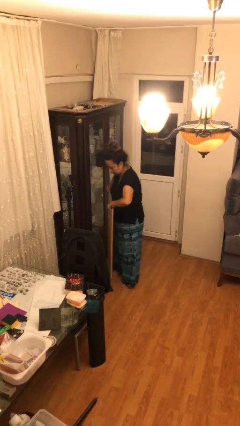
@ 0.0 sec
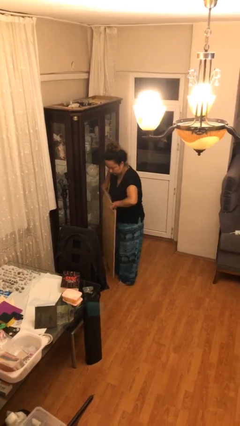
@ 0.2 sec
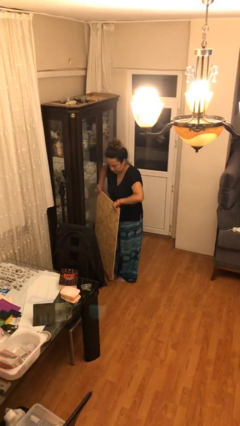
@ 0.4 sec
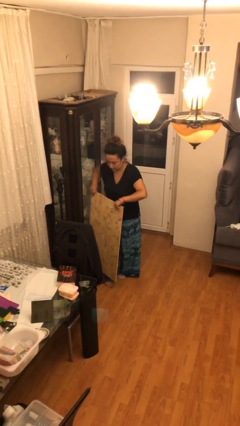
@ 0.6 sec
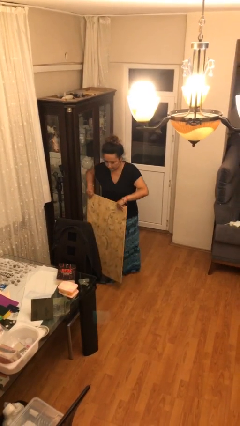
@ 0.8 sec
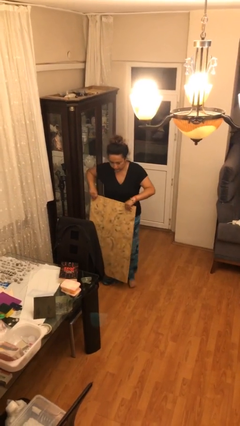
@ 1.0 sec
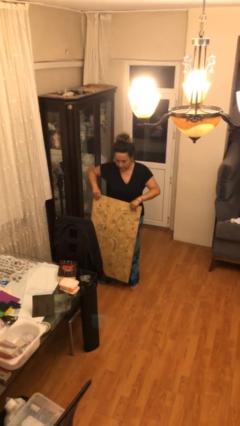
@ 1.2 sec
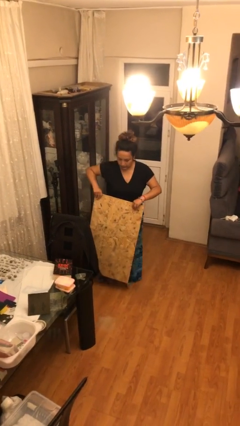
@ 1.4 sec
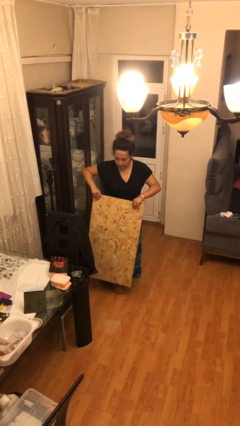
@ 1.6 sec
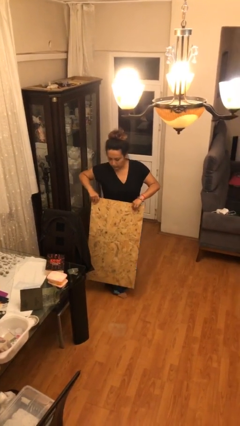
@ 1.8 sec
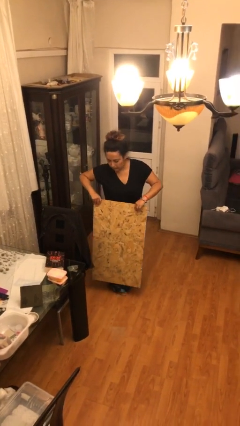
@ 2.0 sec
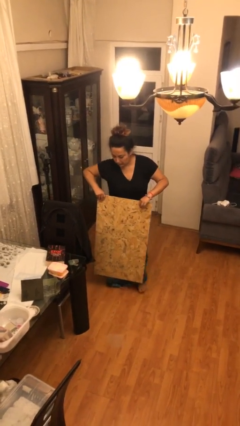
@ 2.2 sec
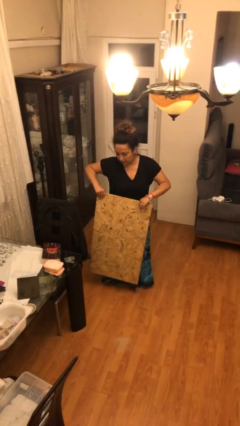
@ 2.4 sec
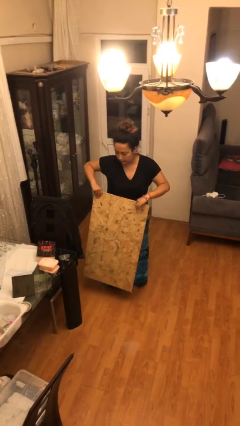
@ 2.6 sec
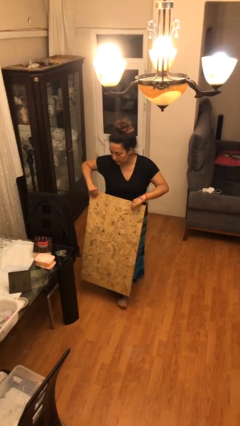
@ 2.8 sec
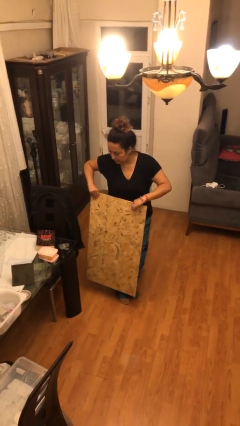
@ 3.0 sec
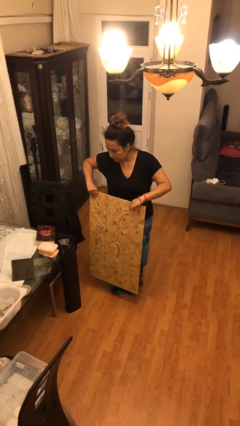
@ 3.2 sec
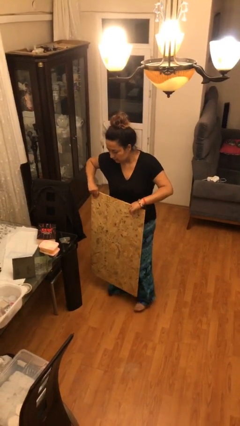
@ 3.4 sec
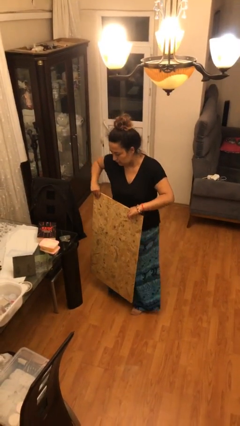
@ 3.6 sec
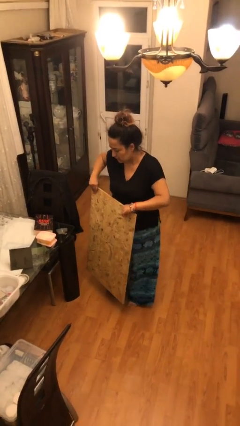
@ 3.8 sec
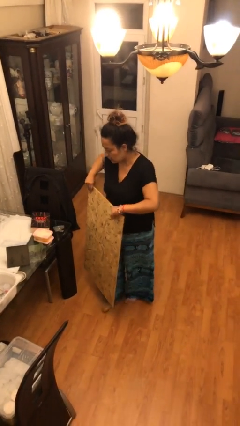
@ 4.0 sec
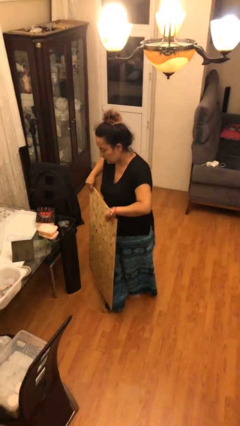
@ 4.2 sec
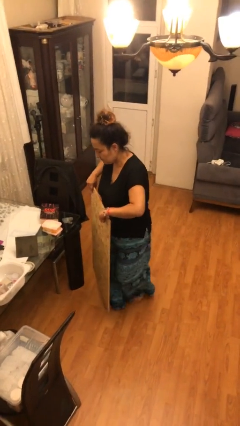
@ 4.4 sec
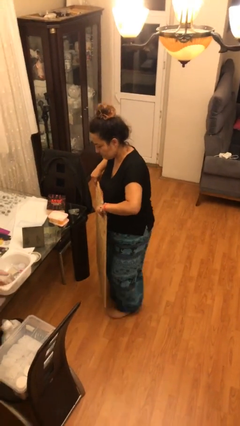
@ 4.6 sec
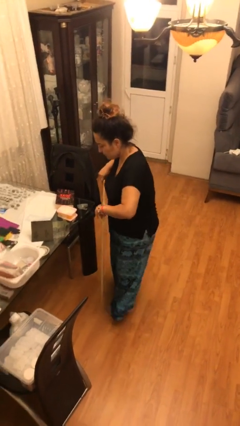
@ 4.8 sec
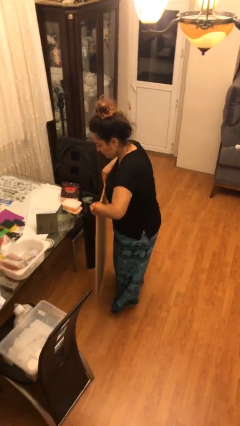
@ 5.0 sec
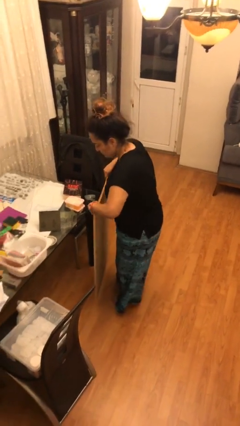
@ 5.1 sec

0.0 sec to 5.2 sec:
person carries heavy object

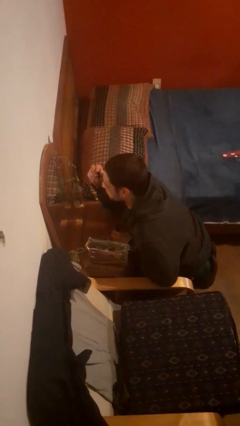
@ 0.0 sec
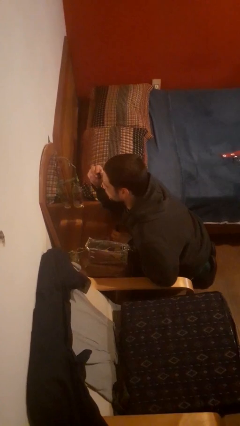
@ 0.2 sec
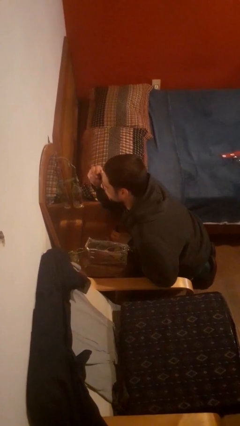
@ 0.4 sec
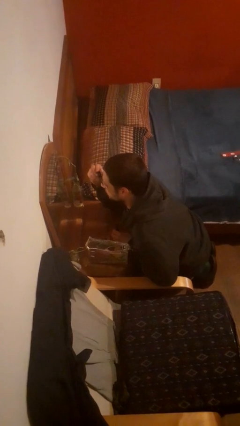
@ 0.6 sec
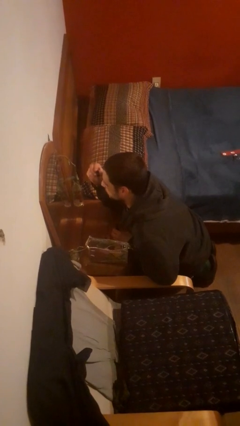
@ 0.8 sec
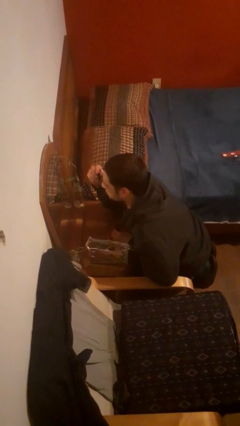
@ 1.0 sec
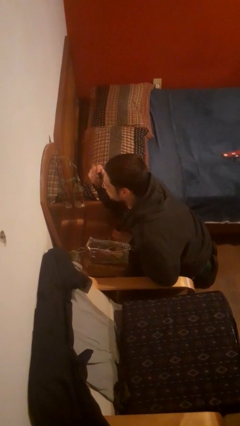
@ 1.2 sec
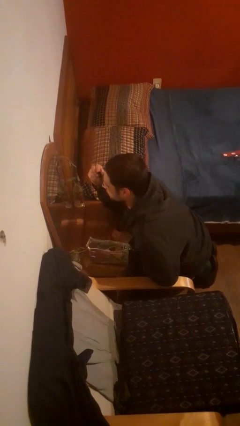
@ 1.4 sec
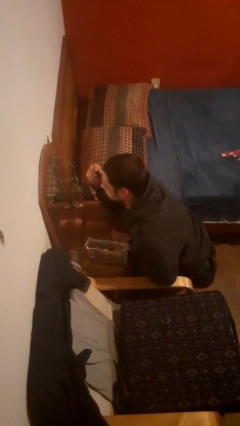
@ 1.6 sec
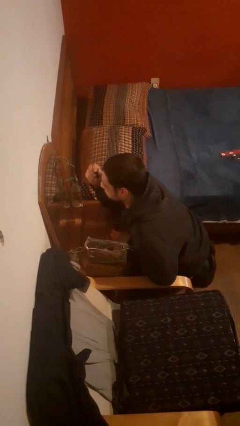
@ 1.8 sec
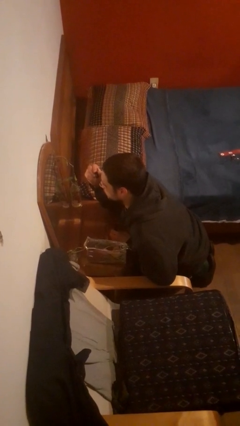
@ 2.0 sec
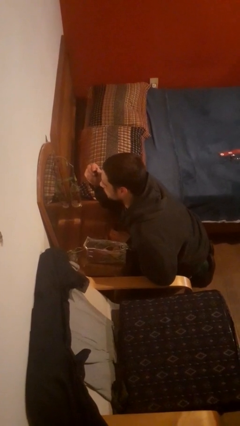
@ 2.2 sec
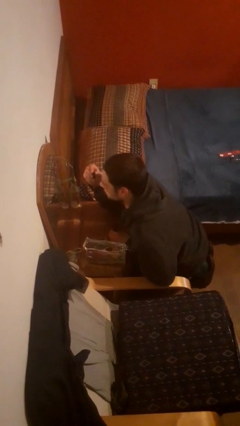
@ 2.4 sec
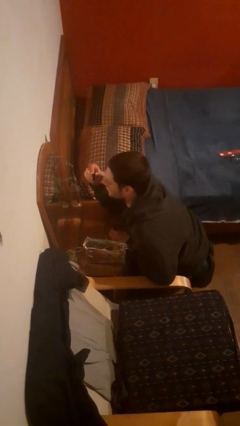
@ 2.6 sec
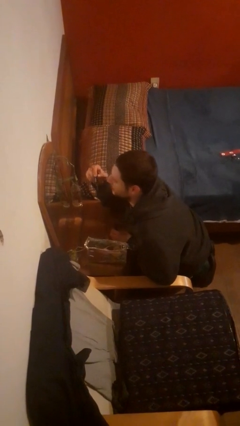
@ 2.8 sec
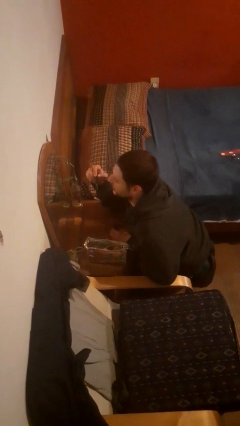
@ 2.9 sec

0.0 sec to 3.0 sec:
person applies eye makeup

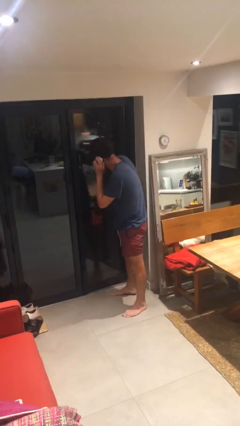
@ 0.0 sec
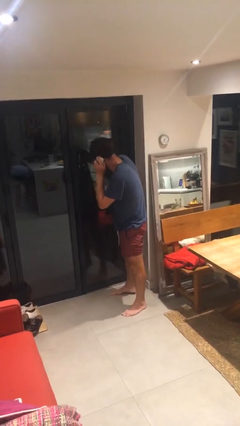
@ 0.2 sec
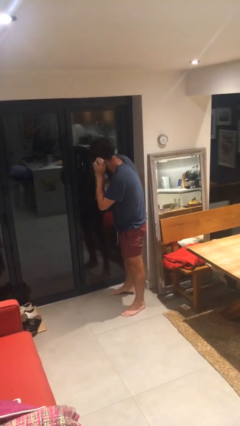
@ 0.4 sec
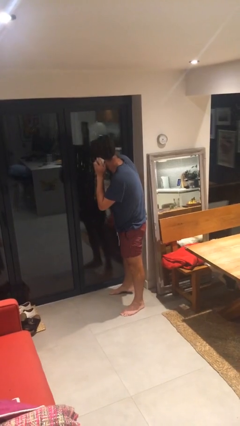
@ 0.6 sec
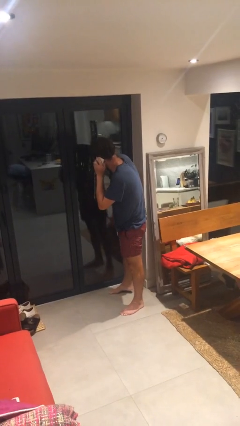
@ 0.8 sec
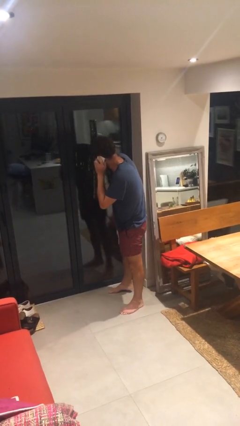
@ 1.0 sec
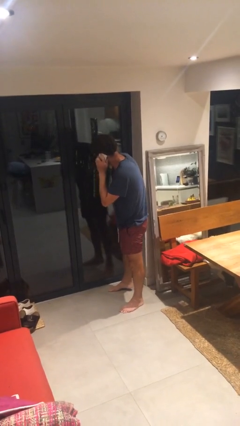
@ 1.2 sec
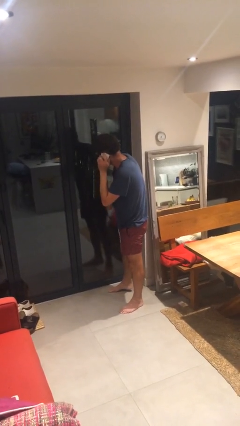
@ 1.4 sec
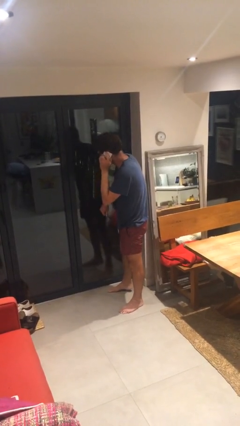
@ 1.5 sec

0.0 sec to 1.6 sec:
person closes facility door

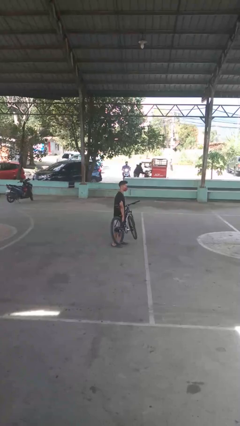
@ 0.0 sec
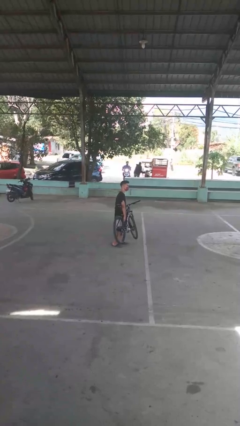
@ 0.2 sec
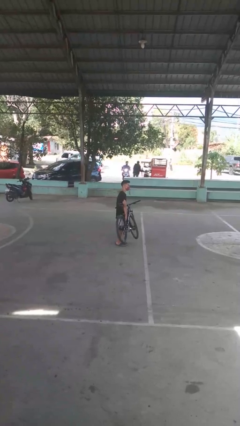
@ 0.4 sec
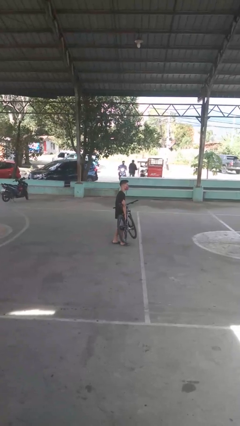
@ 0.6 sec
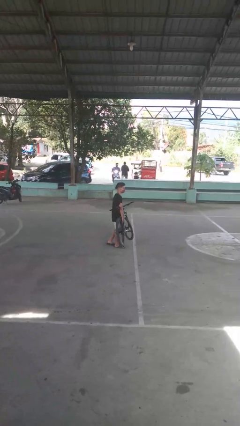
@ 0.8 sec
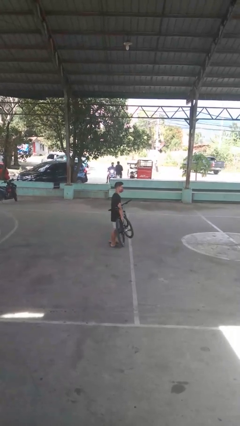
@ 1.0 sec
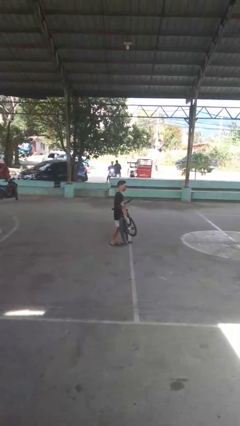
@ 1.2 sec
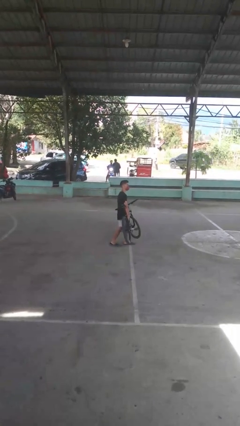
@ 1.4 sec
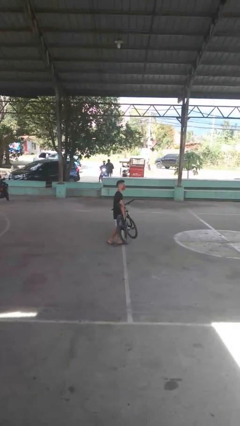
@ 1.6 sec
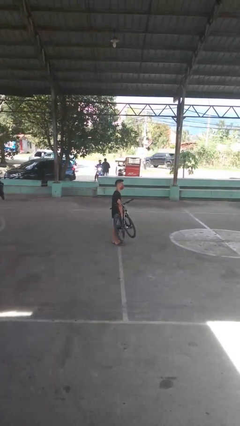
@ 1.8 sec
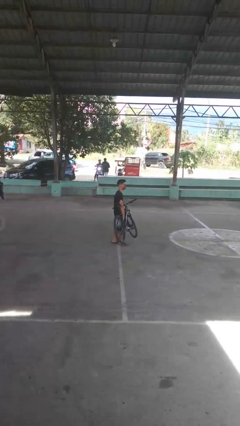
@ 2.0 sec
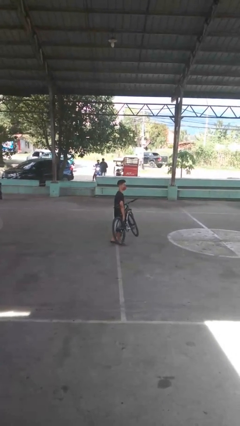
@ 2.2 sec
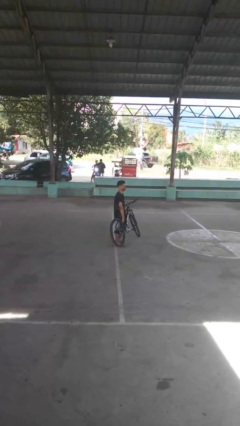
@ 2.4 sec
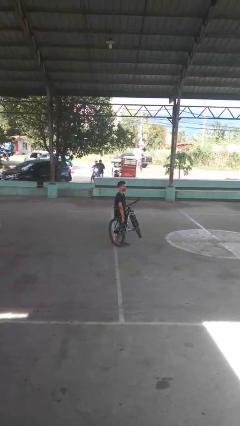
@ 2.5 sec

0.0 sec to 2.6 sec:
person carries bicycle

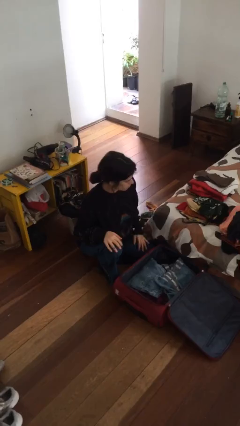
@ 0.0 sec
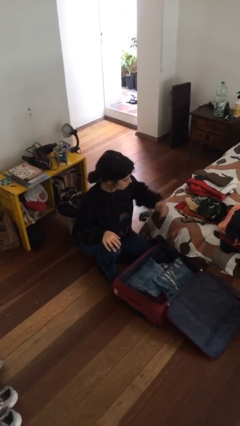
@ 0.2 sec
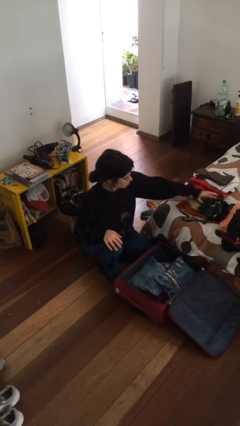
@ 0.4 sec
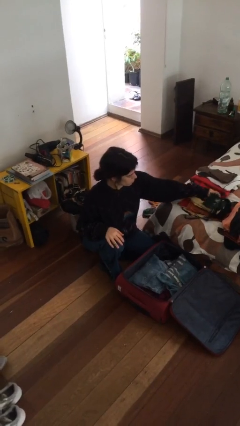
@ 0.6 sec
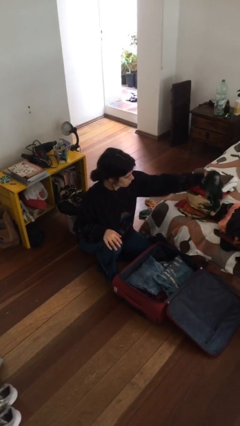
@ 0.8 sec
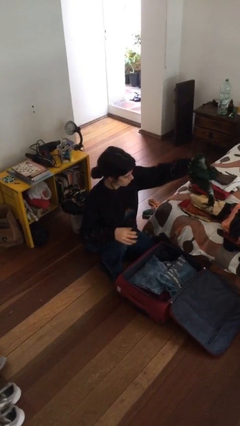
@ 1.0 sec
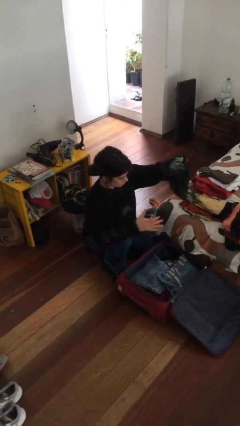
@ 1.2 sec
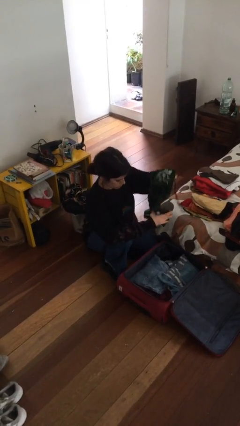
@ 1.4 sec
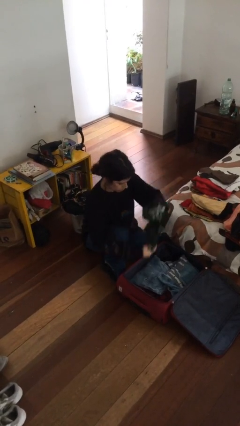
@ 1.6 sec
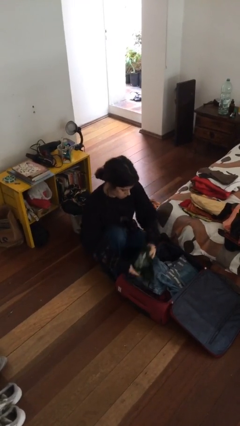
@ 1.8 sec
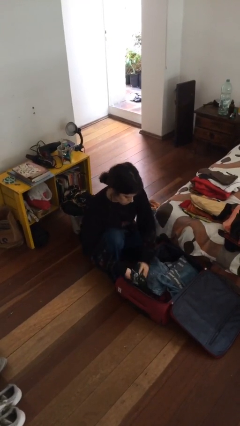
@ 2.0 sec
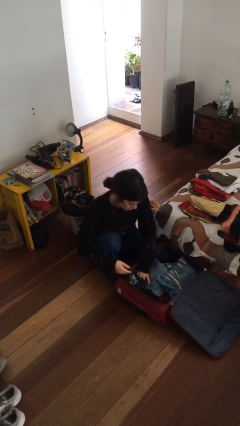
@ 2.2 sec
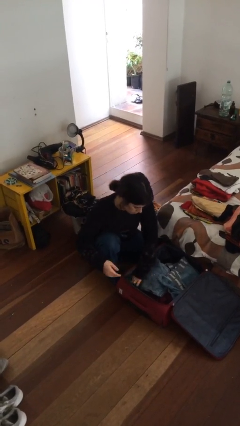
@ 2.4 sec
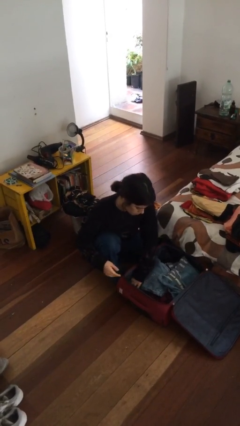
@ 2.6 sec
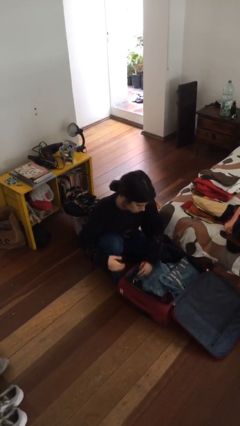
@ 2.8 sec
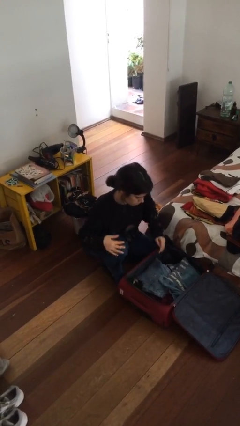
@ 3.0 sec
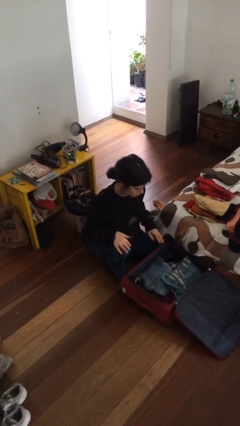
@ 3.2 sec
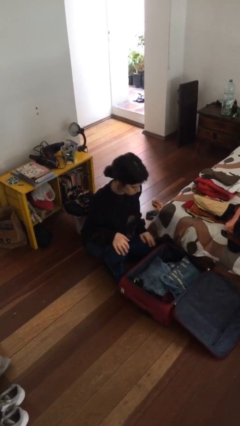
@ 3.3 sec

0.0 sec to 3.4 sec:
person loads clothes into suitcase

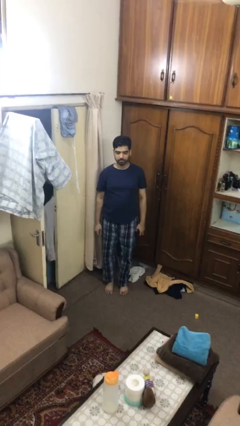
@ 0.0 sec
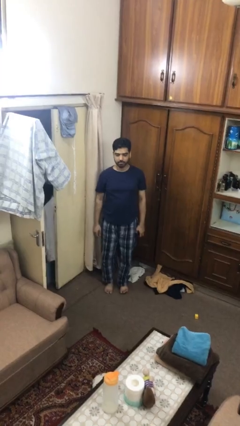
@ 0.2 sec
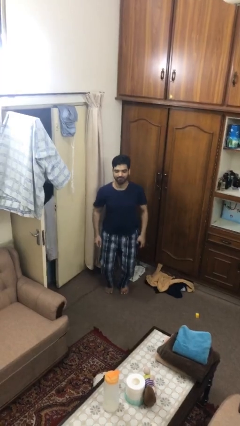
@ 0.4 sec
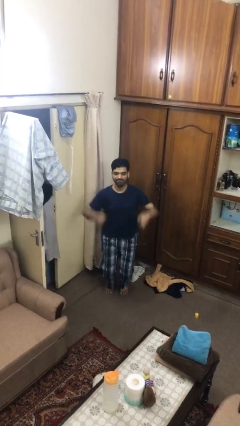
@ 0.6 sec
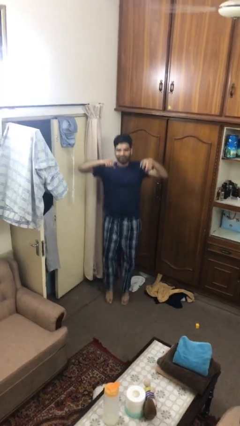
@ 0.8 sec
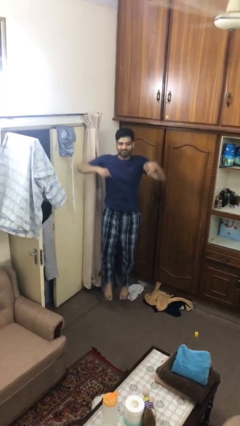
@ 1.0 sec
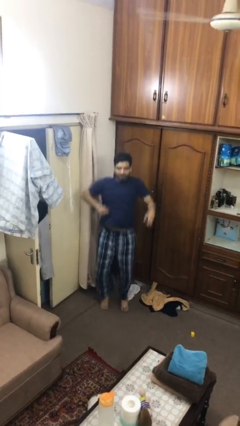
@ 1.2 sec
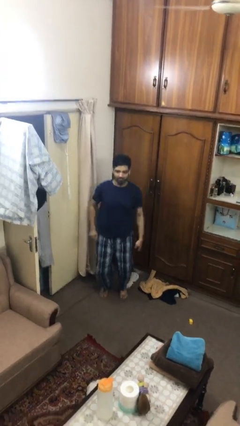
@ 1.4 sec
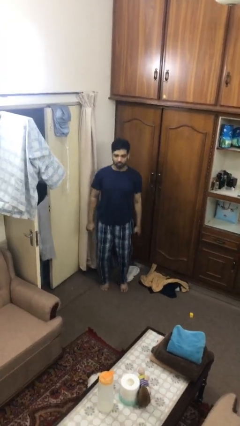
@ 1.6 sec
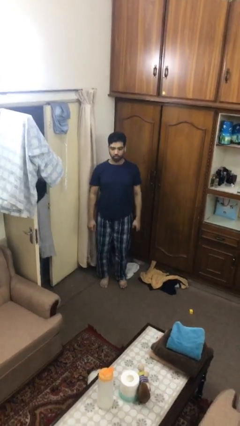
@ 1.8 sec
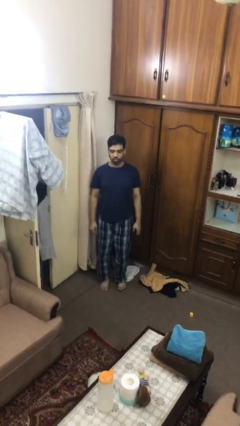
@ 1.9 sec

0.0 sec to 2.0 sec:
person jumps
